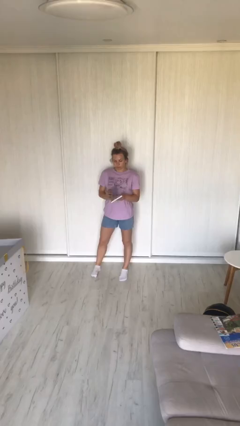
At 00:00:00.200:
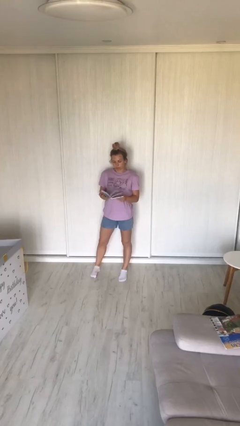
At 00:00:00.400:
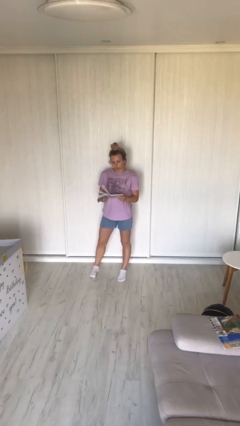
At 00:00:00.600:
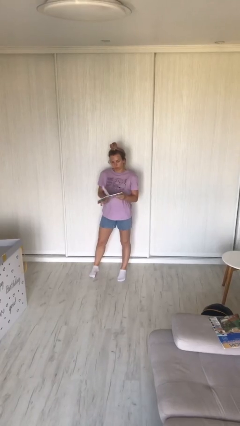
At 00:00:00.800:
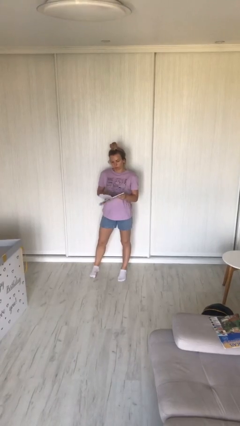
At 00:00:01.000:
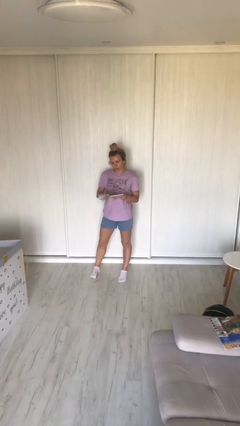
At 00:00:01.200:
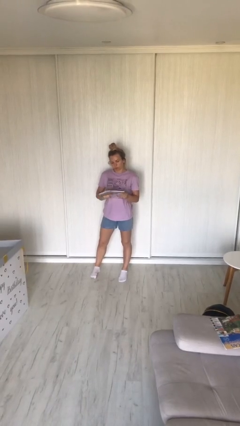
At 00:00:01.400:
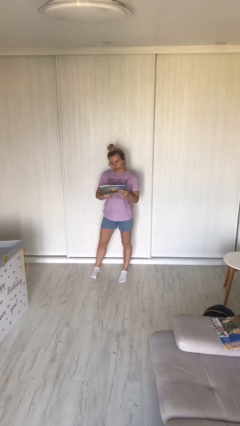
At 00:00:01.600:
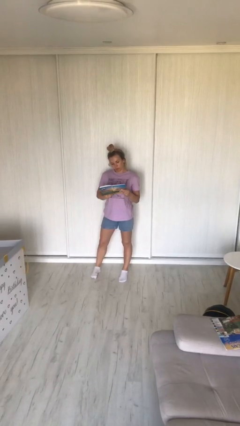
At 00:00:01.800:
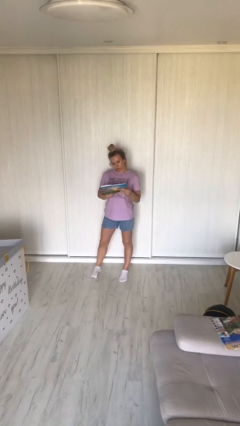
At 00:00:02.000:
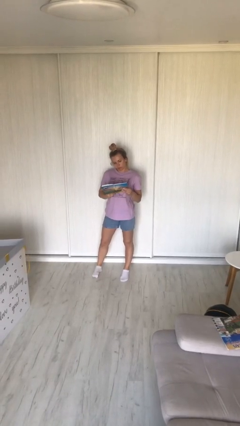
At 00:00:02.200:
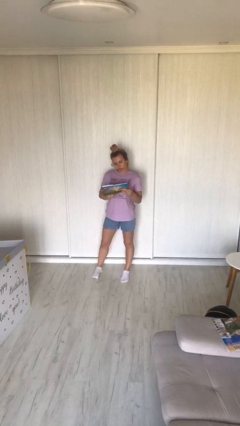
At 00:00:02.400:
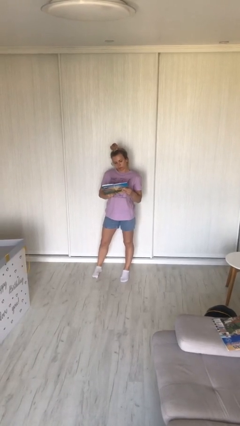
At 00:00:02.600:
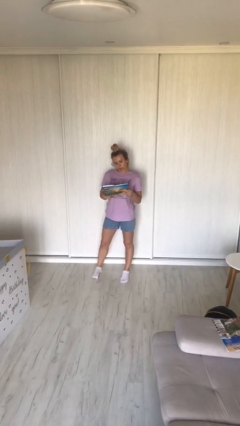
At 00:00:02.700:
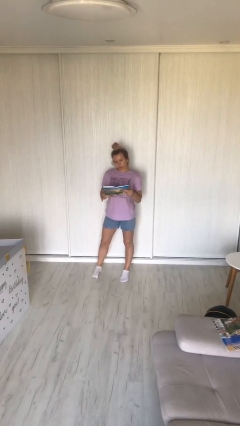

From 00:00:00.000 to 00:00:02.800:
person reads book

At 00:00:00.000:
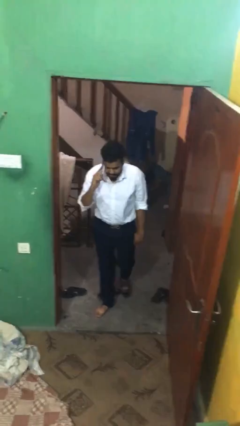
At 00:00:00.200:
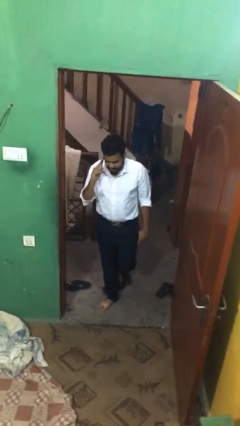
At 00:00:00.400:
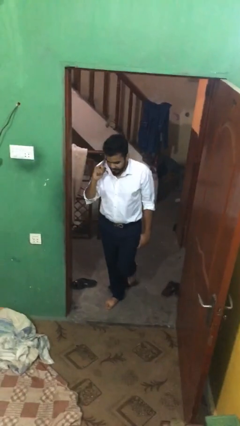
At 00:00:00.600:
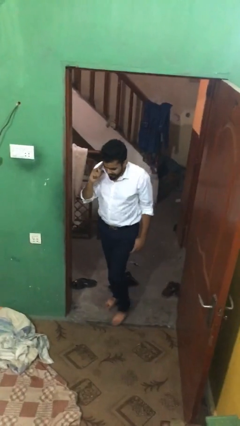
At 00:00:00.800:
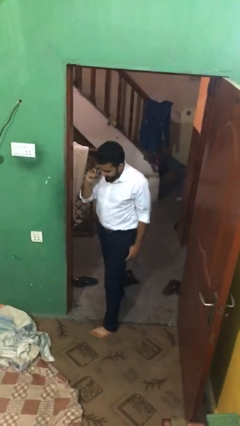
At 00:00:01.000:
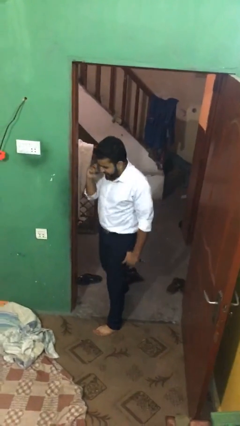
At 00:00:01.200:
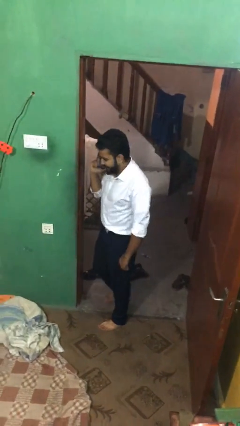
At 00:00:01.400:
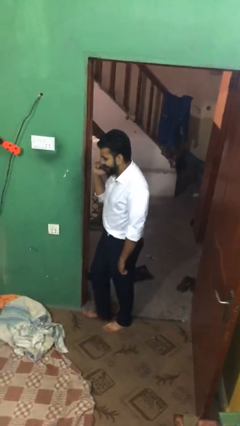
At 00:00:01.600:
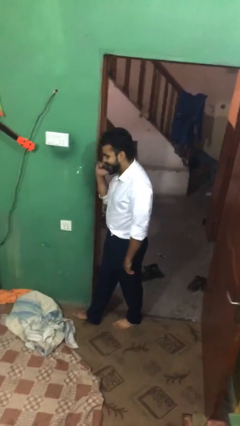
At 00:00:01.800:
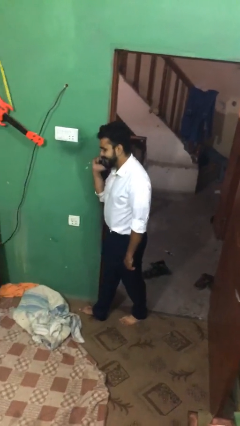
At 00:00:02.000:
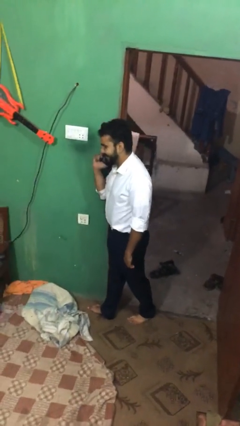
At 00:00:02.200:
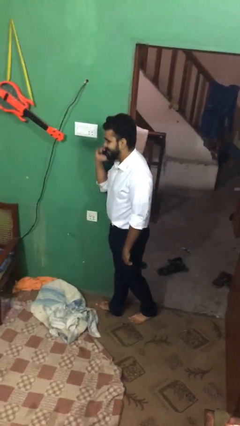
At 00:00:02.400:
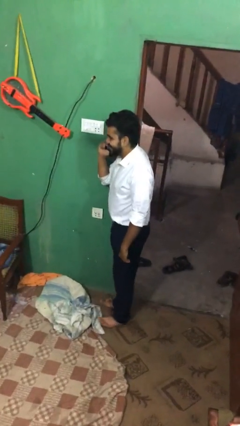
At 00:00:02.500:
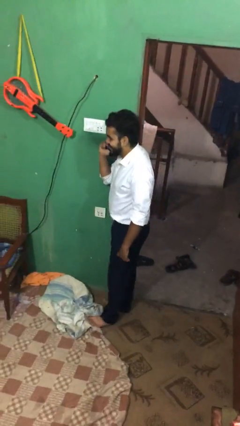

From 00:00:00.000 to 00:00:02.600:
person enters scene through structure

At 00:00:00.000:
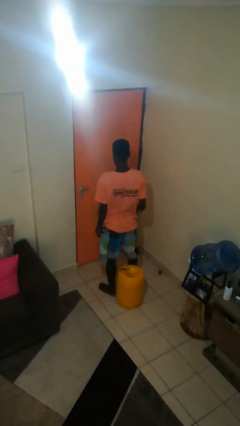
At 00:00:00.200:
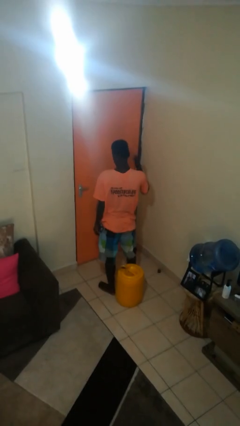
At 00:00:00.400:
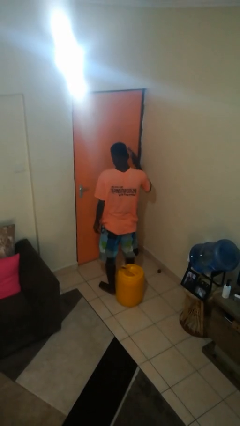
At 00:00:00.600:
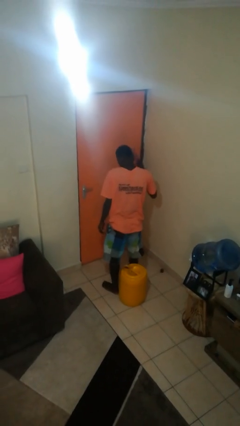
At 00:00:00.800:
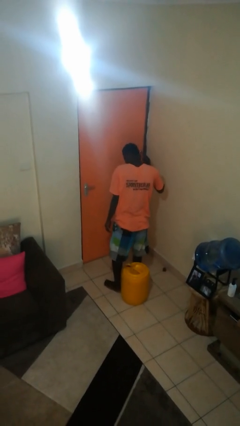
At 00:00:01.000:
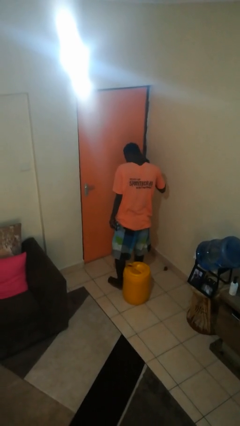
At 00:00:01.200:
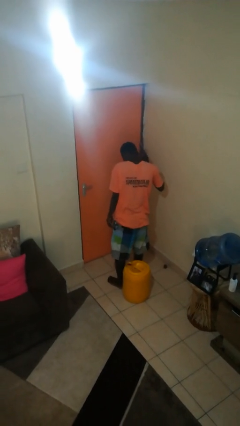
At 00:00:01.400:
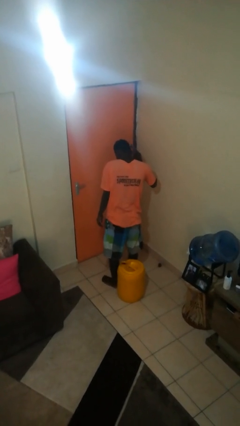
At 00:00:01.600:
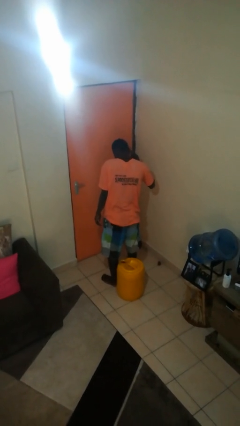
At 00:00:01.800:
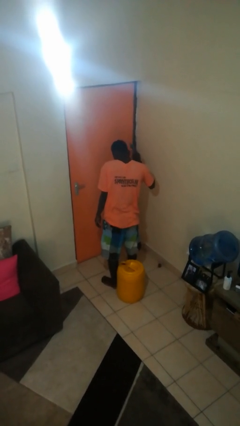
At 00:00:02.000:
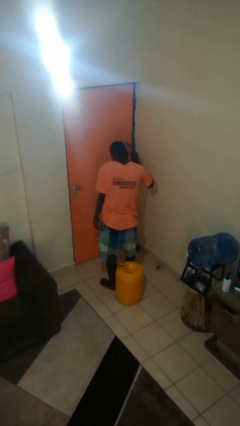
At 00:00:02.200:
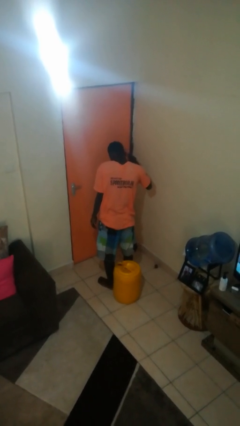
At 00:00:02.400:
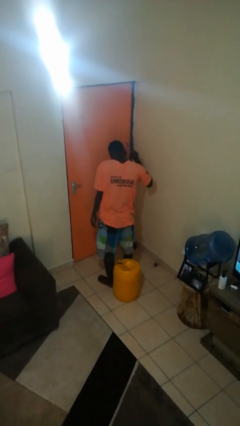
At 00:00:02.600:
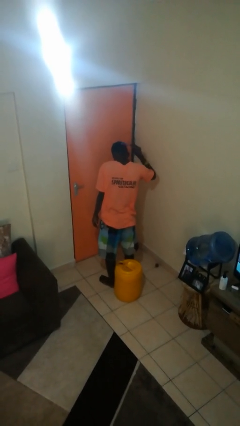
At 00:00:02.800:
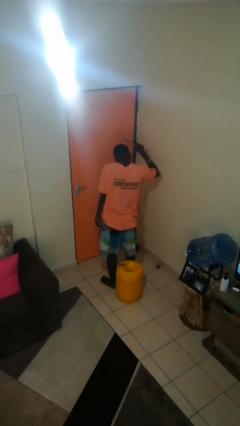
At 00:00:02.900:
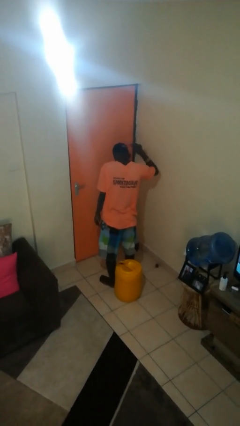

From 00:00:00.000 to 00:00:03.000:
person brushes hair

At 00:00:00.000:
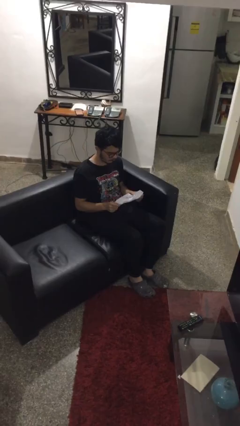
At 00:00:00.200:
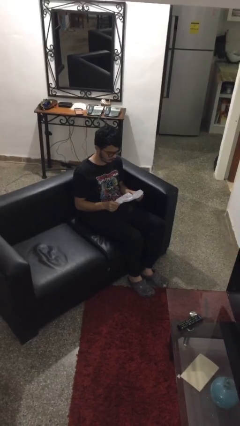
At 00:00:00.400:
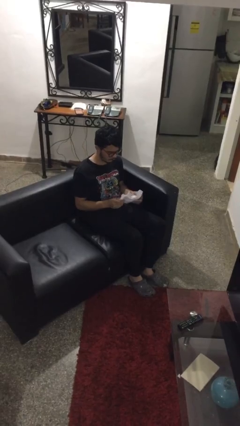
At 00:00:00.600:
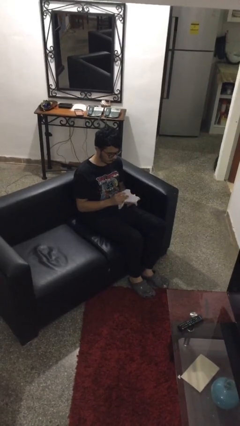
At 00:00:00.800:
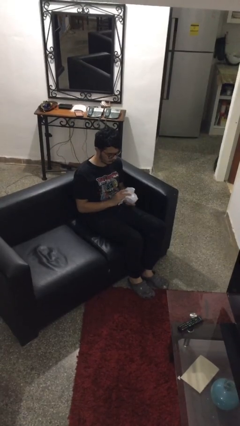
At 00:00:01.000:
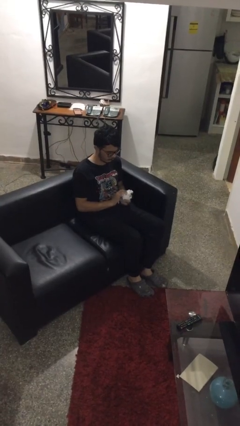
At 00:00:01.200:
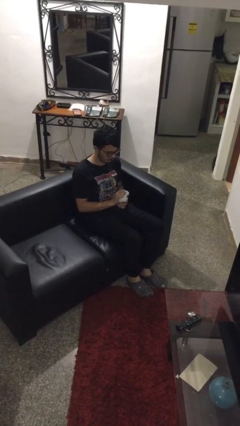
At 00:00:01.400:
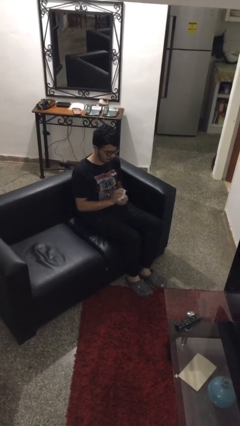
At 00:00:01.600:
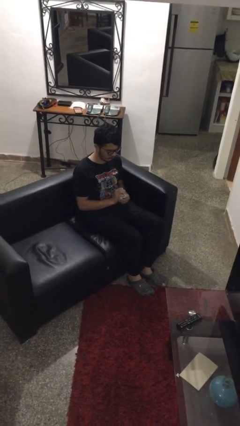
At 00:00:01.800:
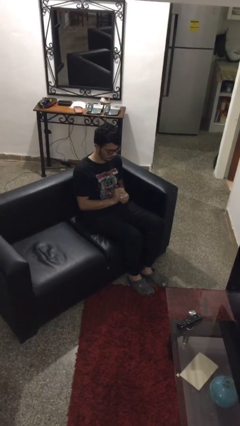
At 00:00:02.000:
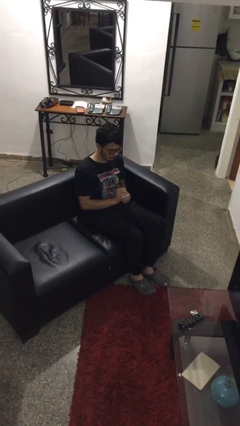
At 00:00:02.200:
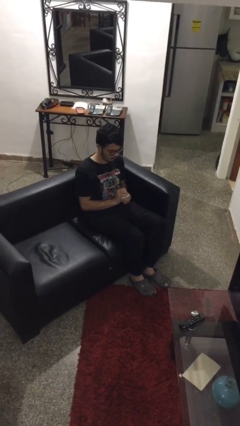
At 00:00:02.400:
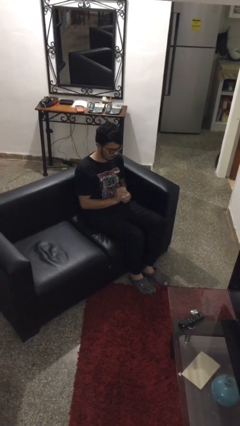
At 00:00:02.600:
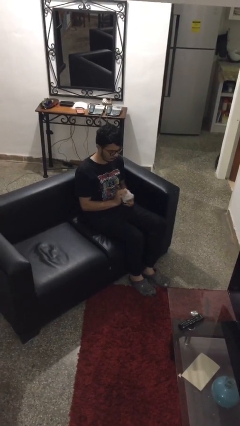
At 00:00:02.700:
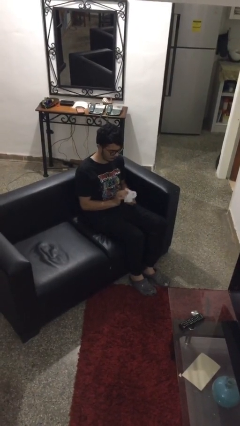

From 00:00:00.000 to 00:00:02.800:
person crumples paper

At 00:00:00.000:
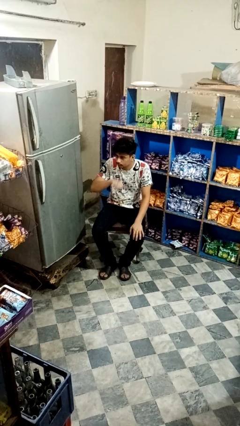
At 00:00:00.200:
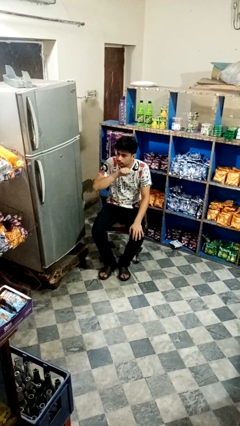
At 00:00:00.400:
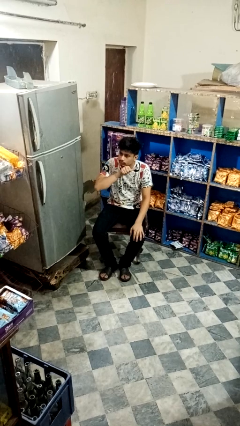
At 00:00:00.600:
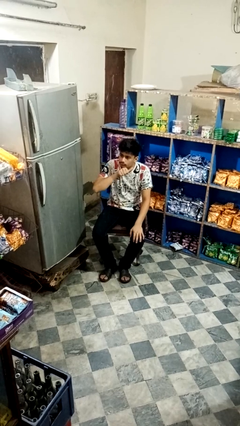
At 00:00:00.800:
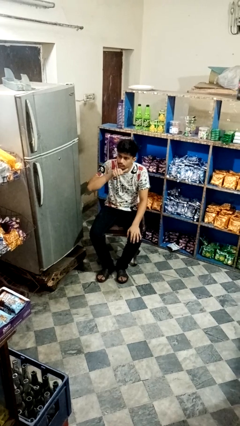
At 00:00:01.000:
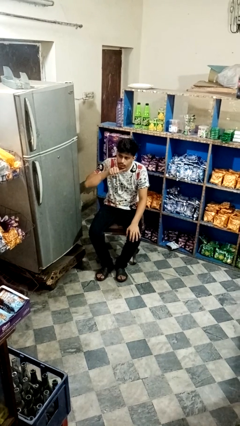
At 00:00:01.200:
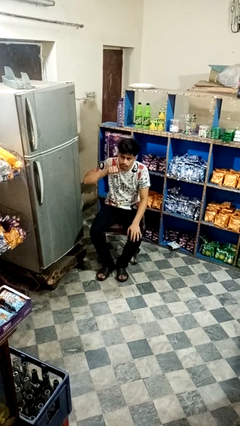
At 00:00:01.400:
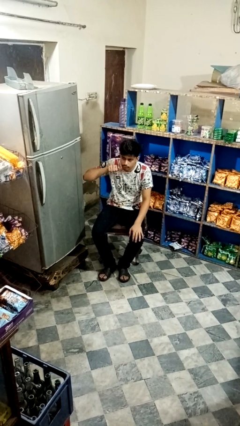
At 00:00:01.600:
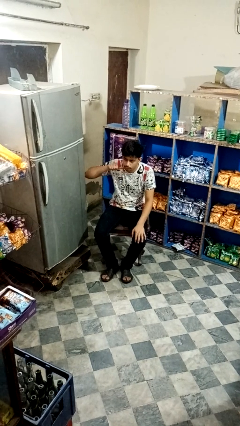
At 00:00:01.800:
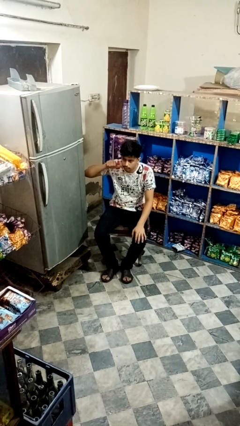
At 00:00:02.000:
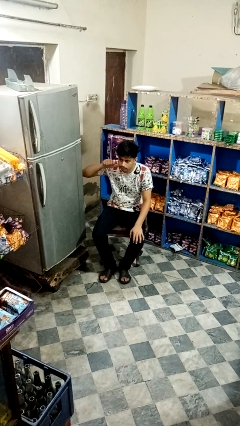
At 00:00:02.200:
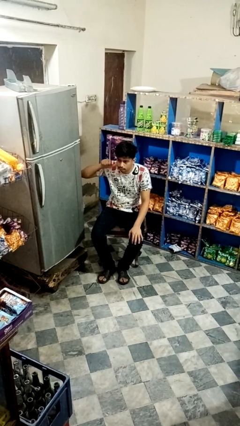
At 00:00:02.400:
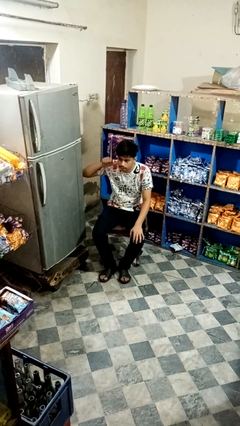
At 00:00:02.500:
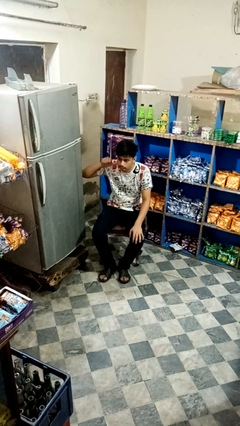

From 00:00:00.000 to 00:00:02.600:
person gestures cut

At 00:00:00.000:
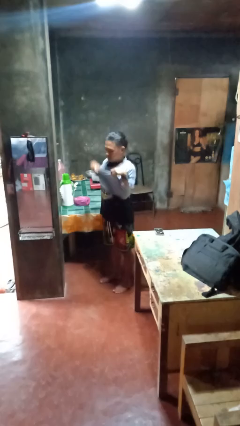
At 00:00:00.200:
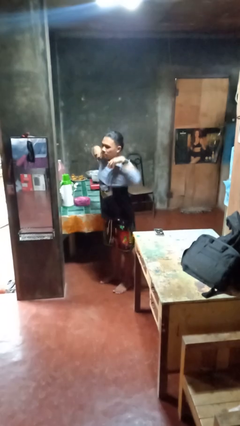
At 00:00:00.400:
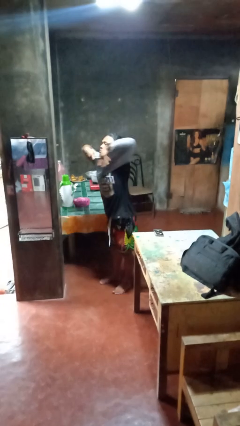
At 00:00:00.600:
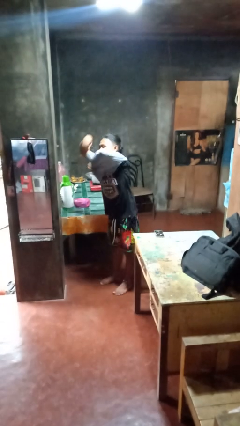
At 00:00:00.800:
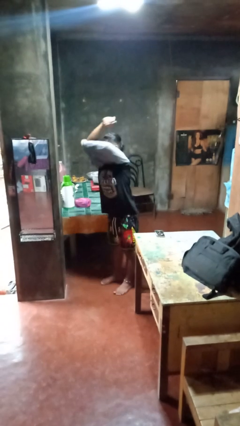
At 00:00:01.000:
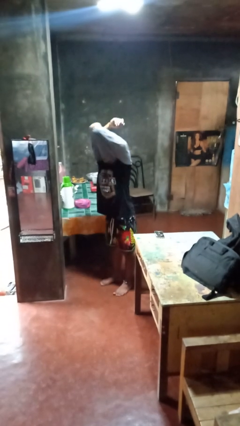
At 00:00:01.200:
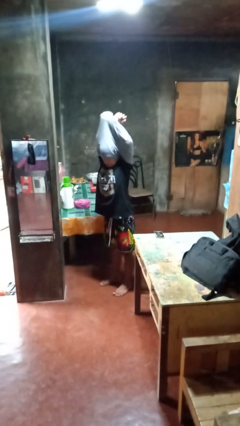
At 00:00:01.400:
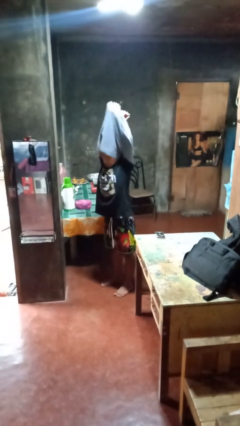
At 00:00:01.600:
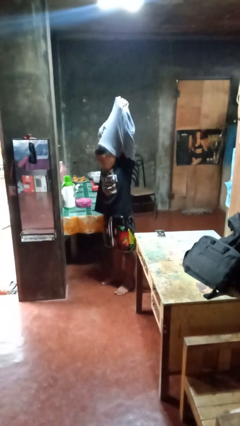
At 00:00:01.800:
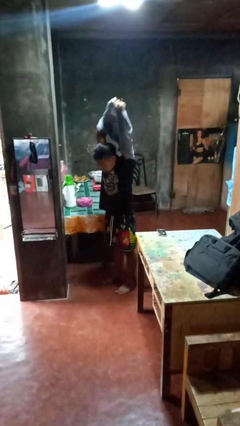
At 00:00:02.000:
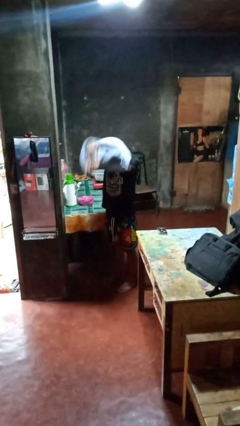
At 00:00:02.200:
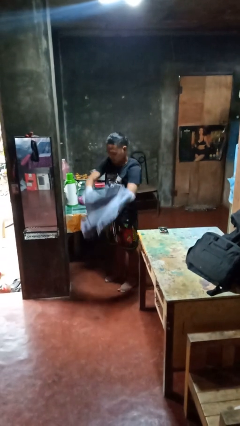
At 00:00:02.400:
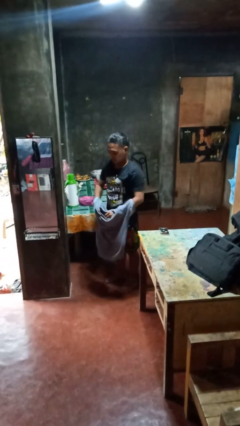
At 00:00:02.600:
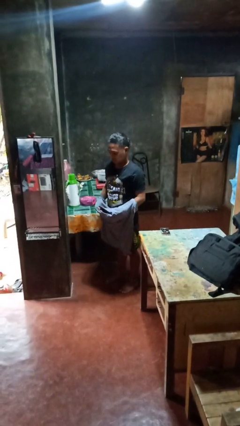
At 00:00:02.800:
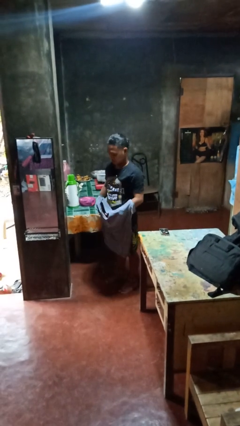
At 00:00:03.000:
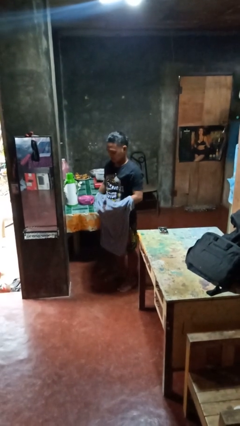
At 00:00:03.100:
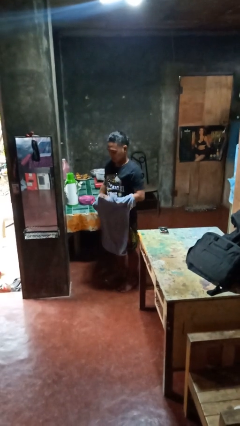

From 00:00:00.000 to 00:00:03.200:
person takes off shirt

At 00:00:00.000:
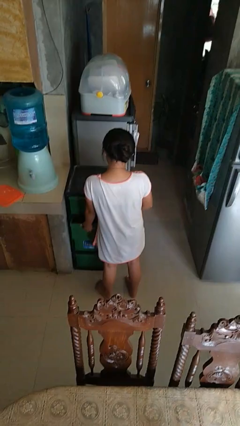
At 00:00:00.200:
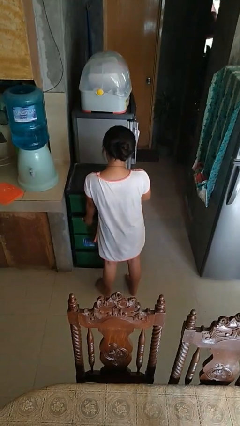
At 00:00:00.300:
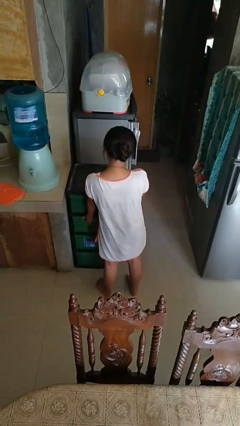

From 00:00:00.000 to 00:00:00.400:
person closes kitchen drawer
